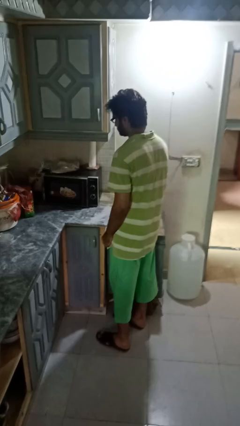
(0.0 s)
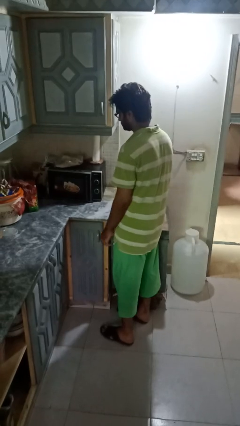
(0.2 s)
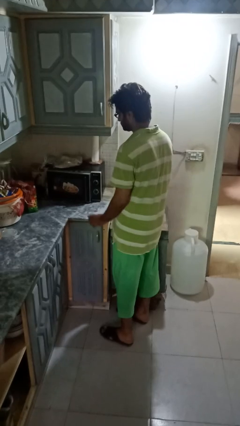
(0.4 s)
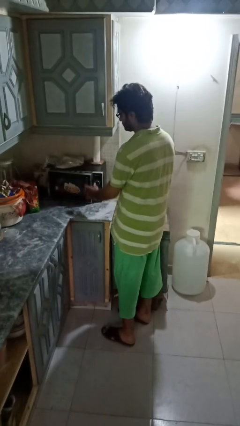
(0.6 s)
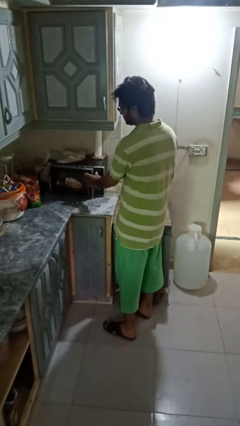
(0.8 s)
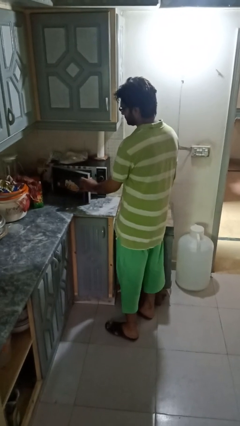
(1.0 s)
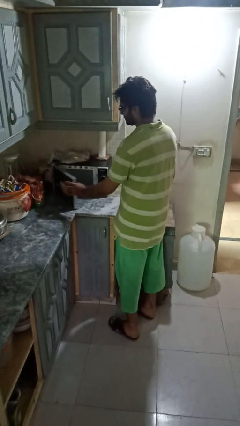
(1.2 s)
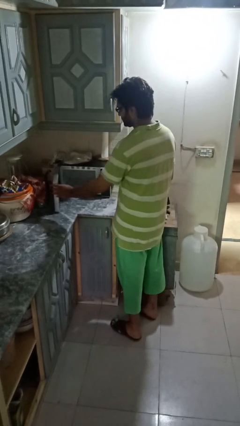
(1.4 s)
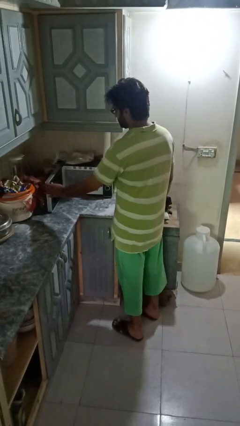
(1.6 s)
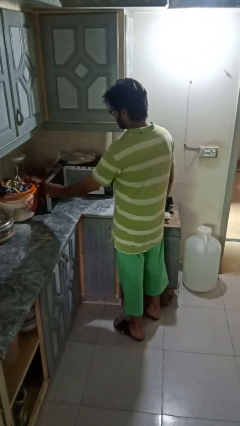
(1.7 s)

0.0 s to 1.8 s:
person opens microwave

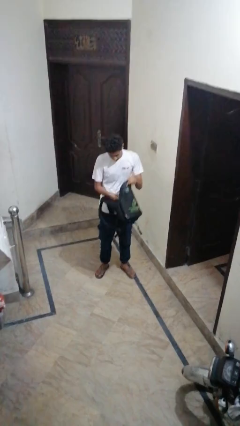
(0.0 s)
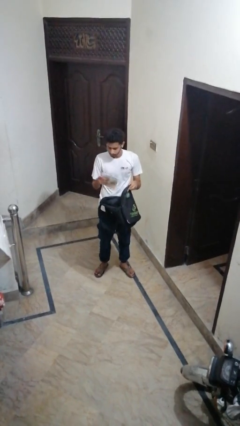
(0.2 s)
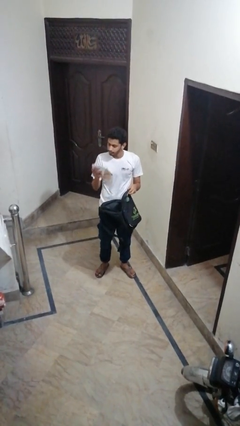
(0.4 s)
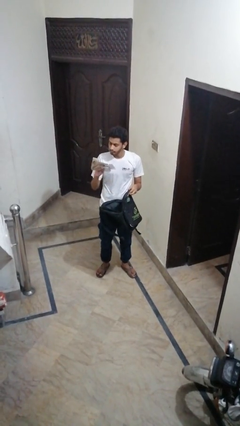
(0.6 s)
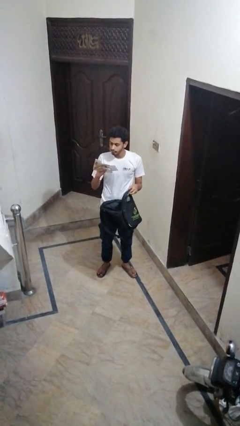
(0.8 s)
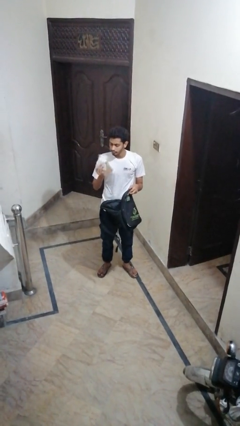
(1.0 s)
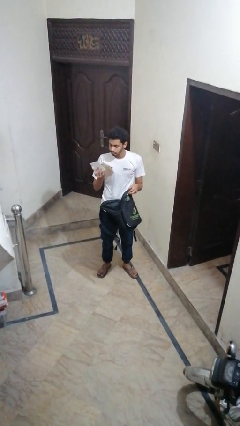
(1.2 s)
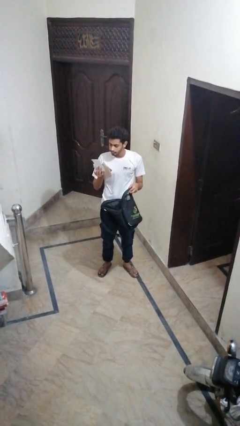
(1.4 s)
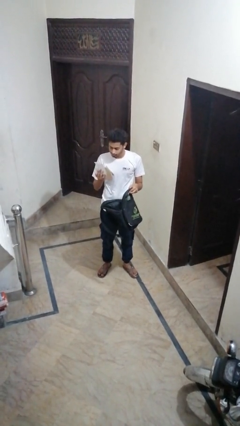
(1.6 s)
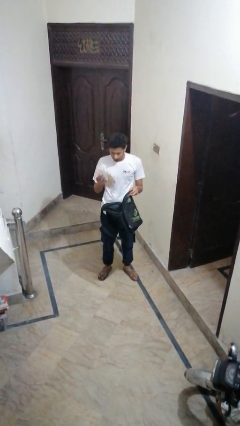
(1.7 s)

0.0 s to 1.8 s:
person takes object from backpack

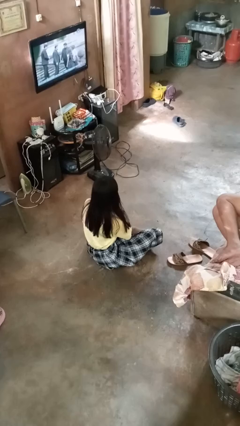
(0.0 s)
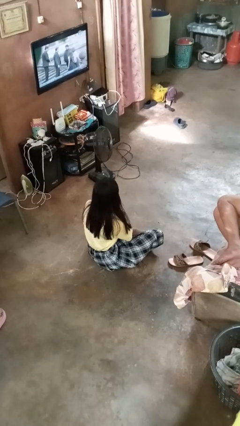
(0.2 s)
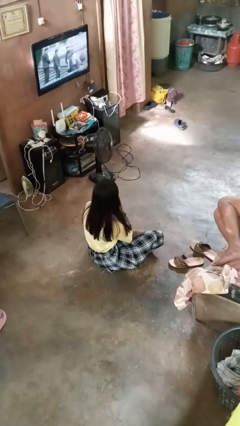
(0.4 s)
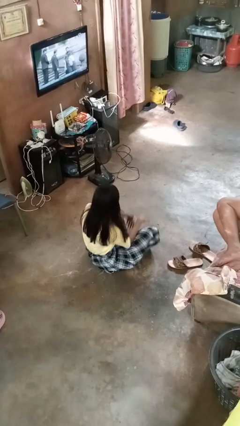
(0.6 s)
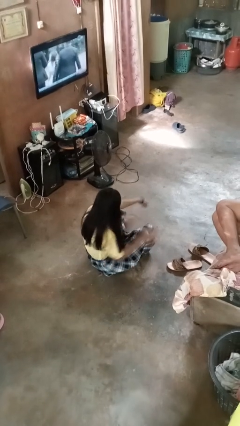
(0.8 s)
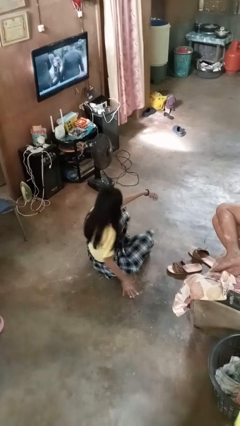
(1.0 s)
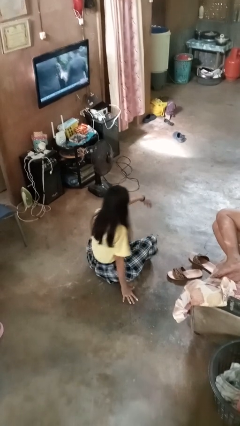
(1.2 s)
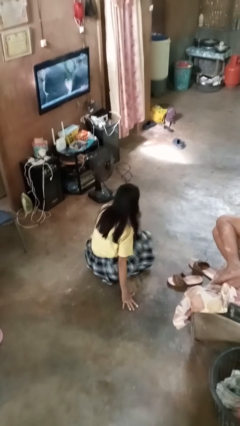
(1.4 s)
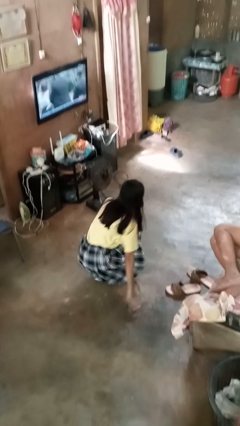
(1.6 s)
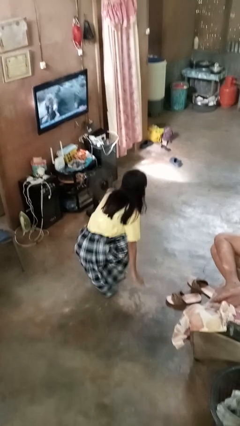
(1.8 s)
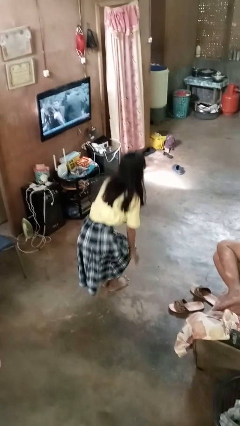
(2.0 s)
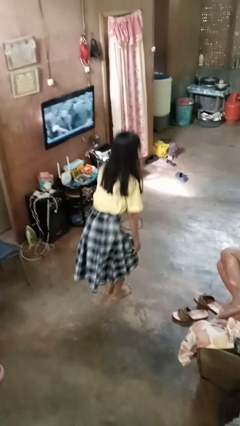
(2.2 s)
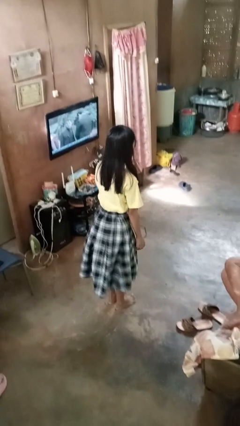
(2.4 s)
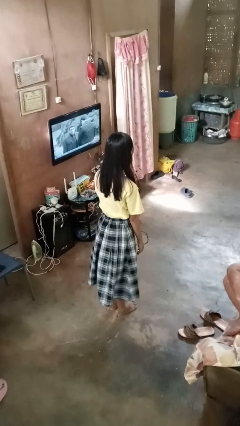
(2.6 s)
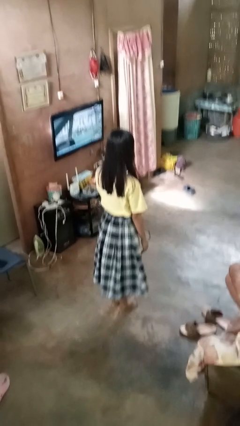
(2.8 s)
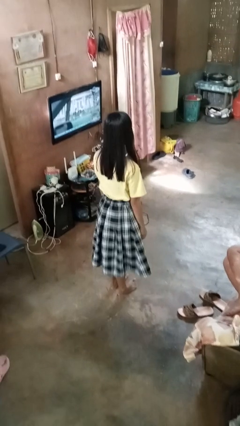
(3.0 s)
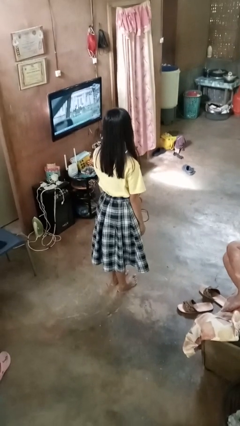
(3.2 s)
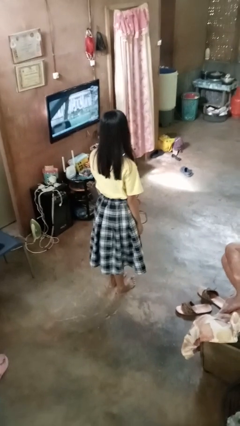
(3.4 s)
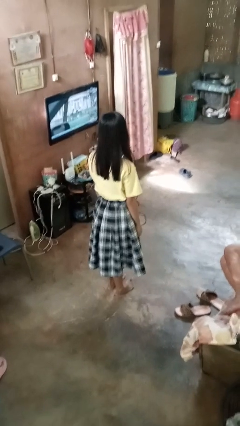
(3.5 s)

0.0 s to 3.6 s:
person stands up from floor

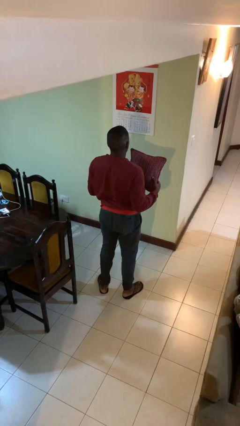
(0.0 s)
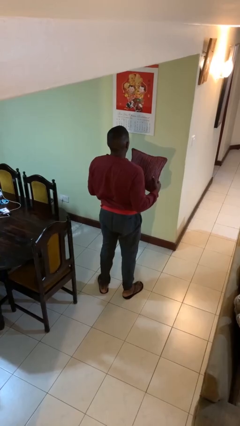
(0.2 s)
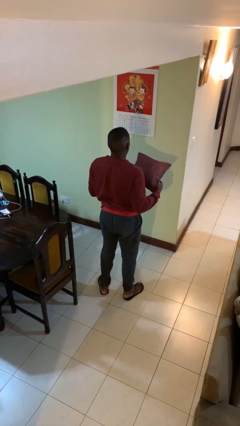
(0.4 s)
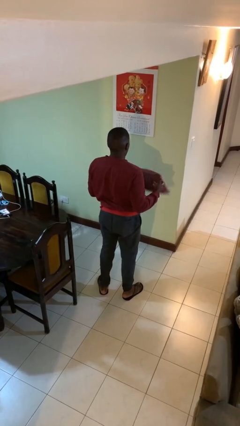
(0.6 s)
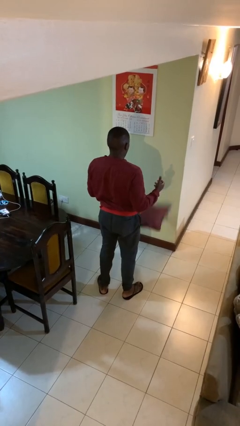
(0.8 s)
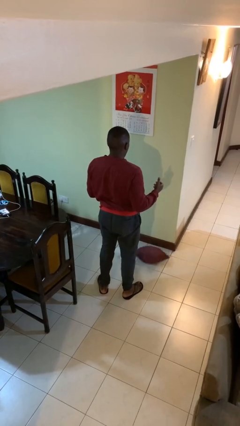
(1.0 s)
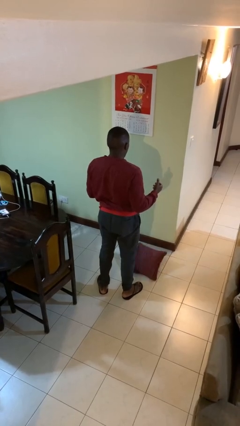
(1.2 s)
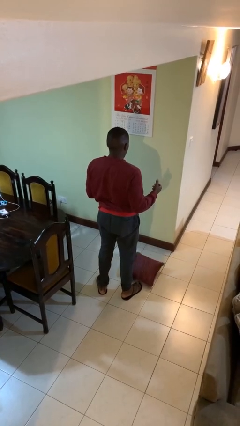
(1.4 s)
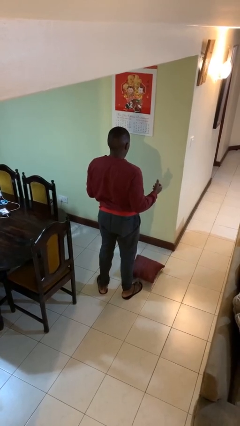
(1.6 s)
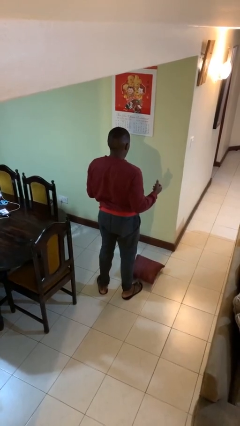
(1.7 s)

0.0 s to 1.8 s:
person drops object

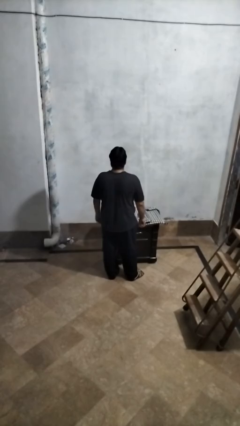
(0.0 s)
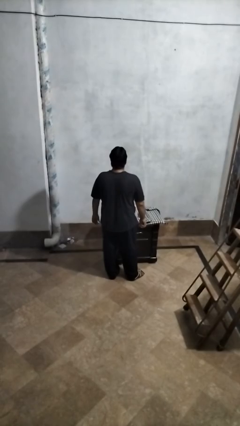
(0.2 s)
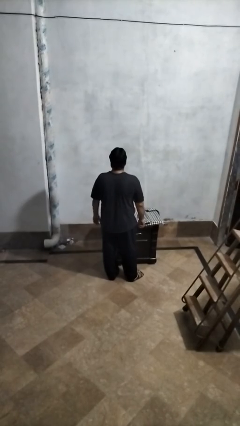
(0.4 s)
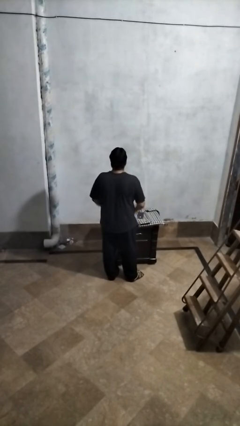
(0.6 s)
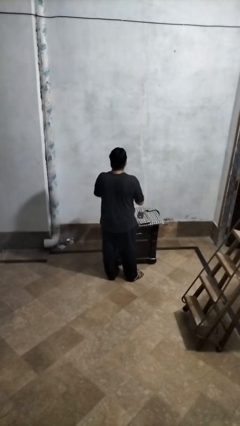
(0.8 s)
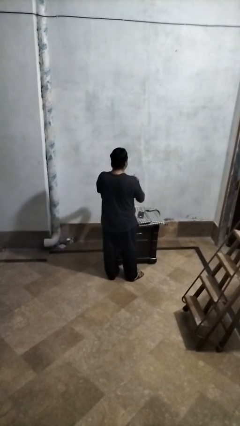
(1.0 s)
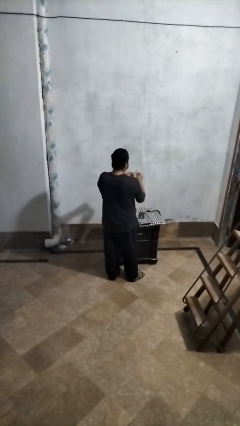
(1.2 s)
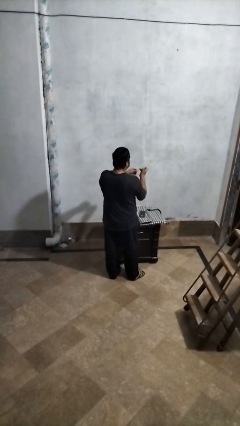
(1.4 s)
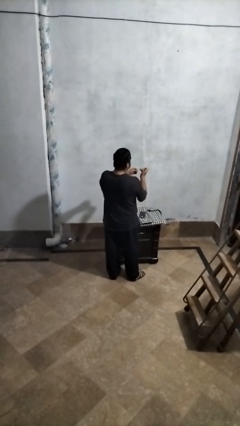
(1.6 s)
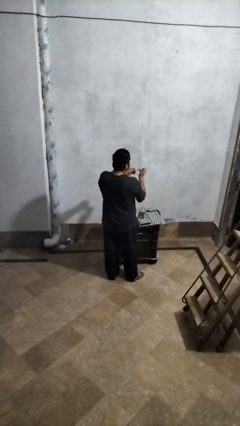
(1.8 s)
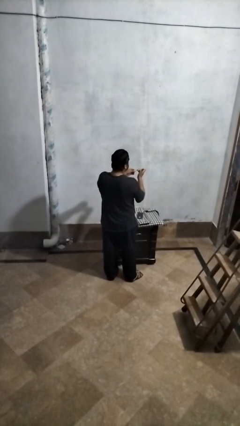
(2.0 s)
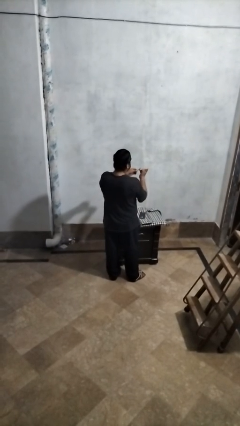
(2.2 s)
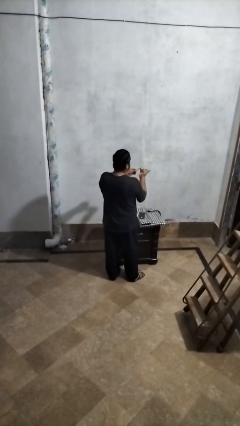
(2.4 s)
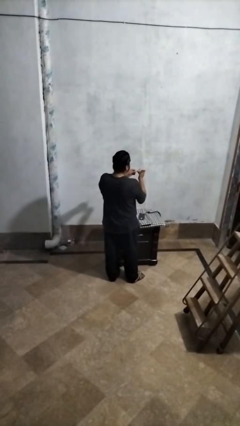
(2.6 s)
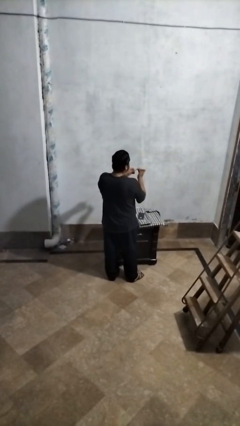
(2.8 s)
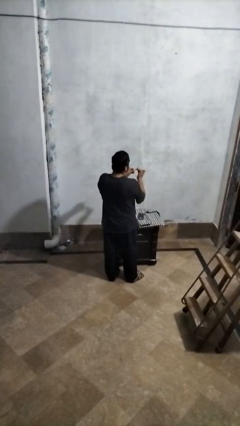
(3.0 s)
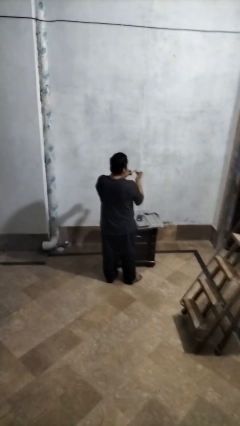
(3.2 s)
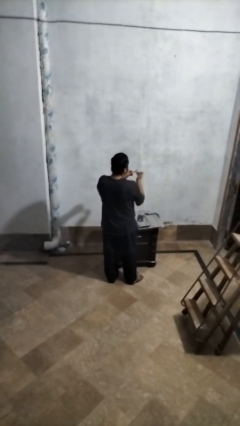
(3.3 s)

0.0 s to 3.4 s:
person files fingernails

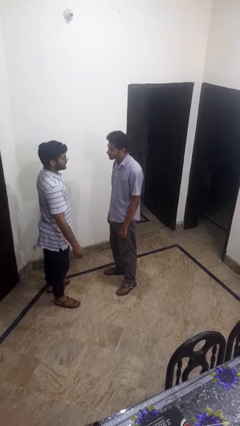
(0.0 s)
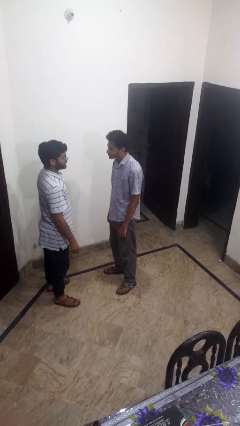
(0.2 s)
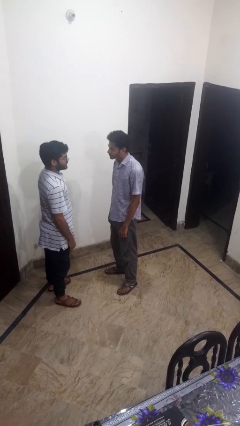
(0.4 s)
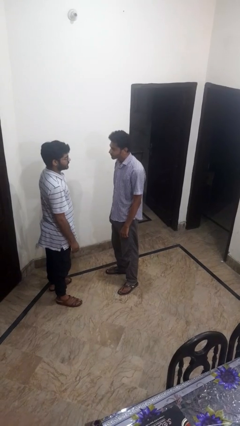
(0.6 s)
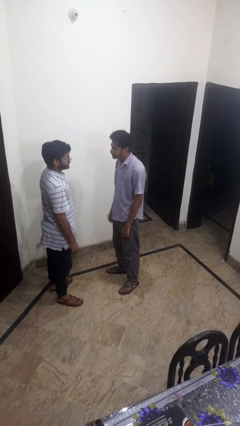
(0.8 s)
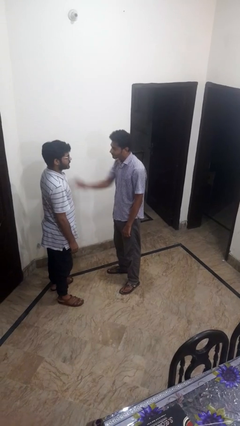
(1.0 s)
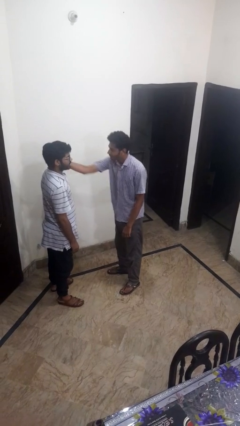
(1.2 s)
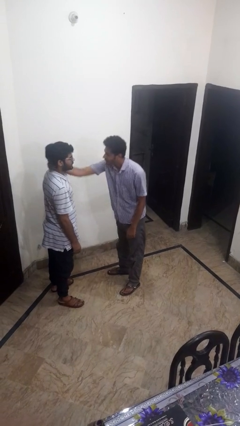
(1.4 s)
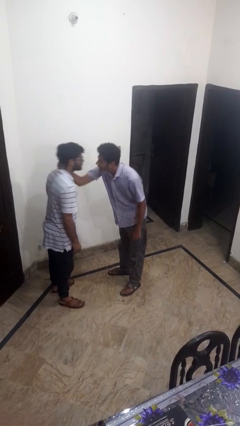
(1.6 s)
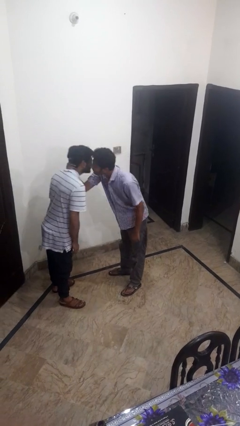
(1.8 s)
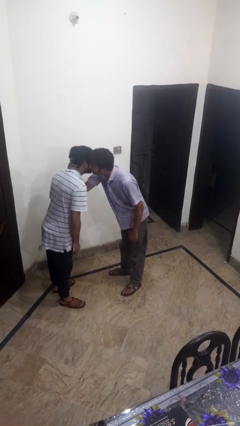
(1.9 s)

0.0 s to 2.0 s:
person grabs person by forearm

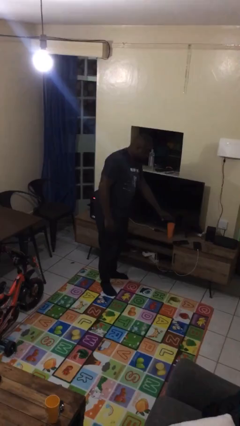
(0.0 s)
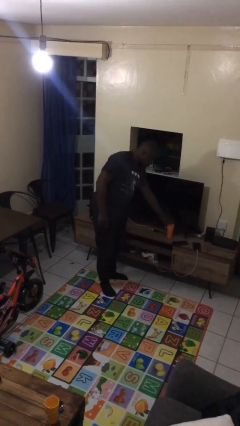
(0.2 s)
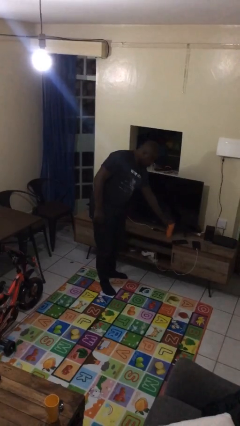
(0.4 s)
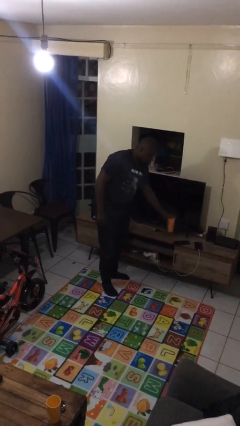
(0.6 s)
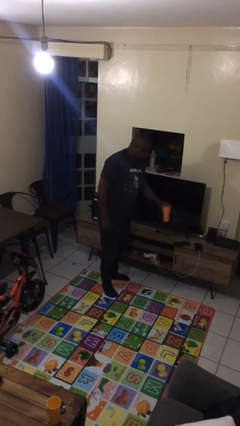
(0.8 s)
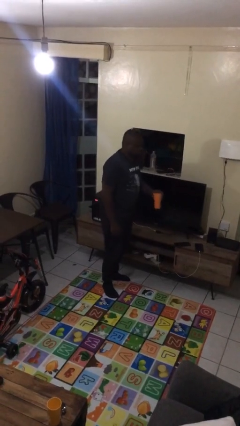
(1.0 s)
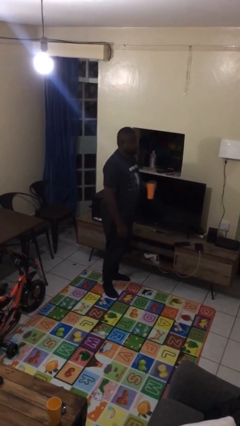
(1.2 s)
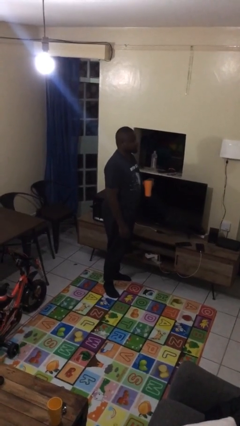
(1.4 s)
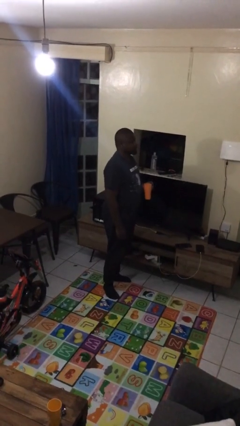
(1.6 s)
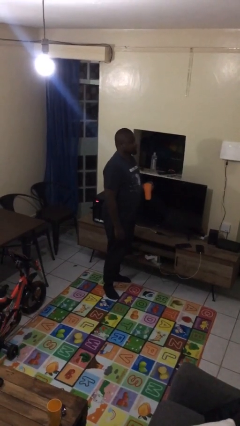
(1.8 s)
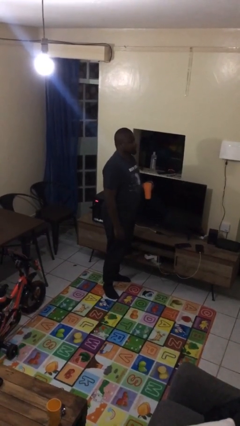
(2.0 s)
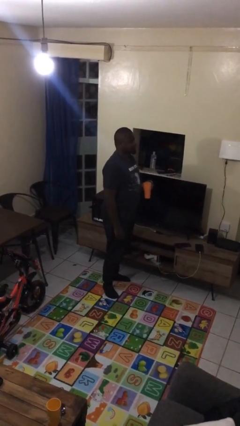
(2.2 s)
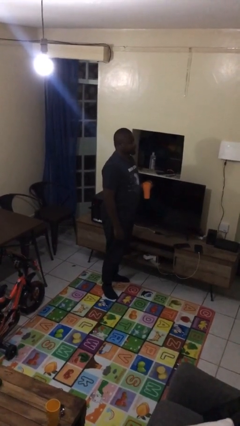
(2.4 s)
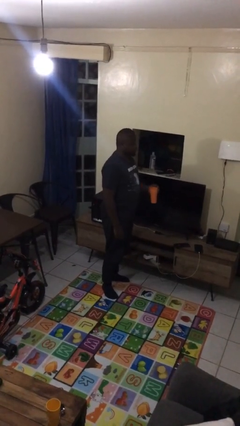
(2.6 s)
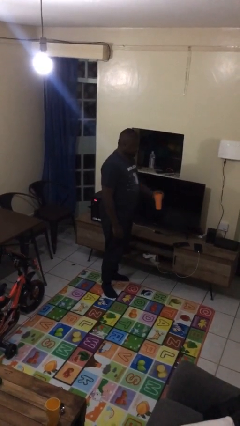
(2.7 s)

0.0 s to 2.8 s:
person picks up object from countertop
